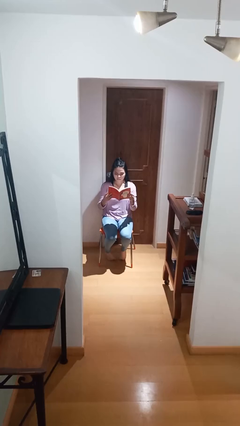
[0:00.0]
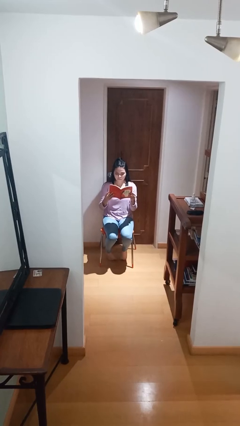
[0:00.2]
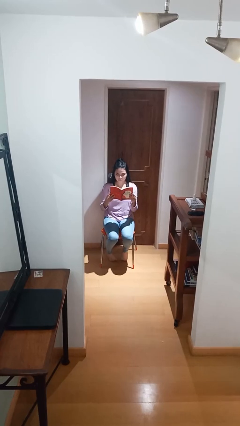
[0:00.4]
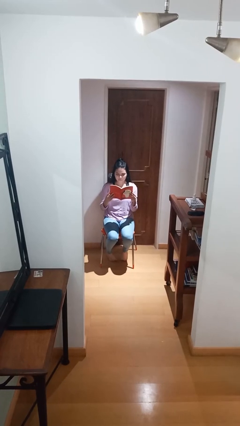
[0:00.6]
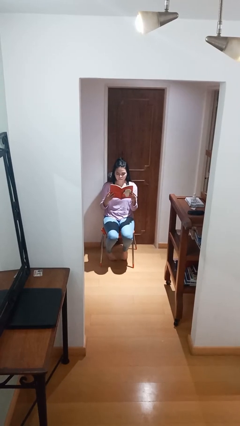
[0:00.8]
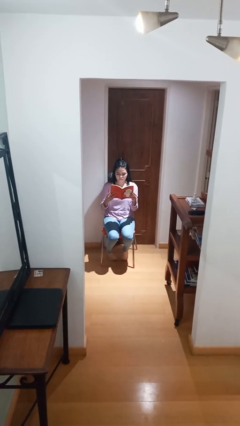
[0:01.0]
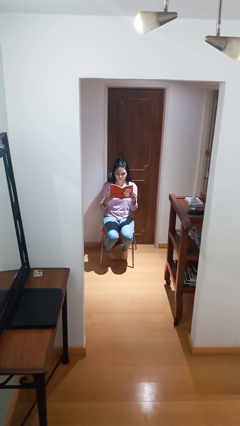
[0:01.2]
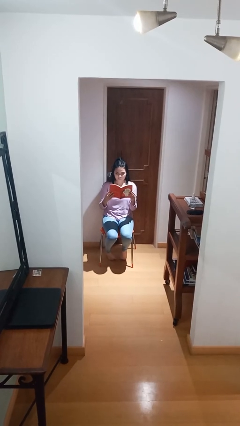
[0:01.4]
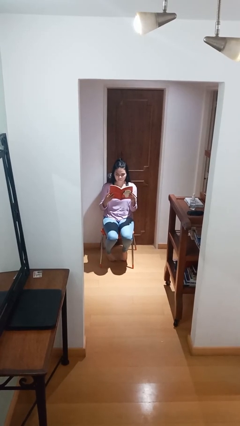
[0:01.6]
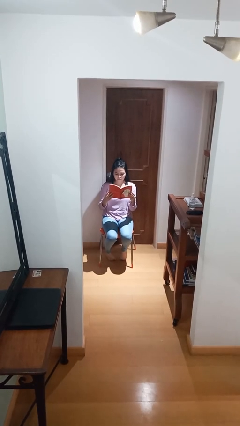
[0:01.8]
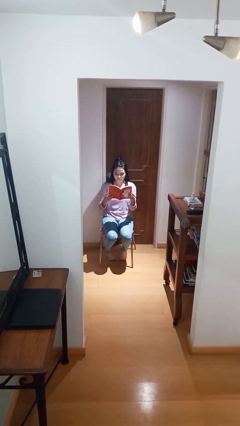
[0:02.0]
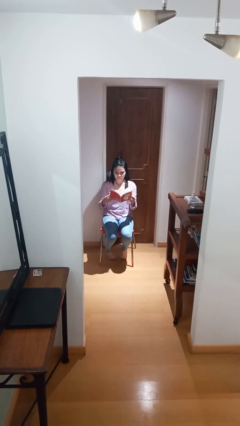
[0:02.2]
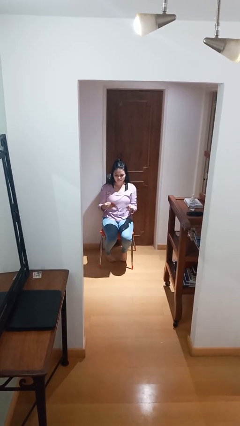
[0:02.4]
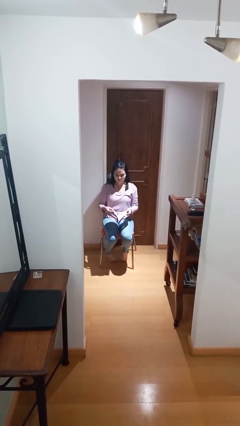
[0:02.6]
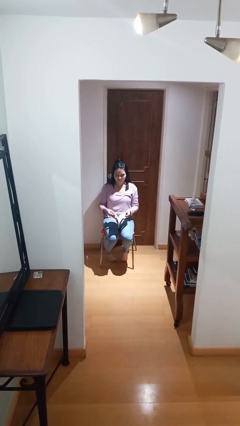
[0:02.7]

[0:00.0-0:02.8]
person reads document

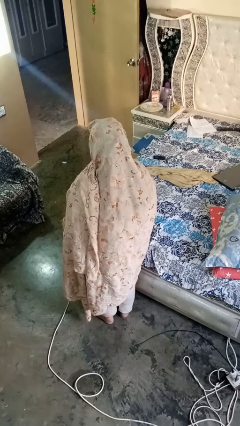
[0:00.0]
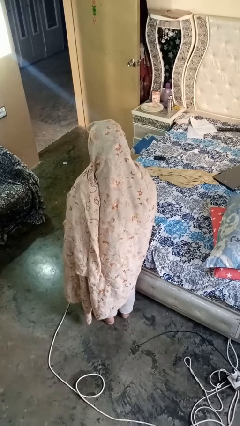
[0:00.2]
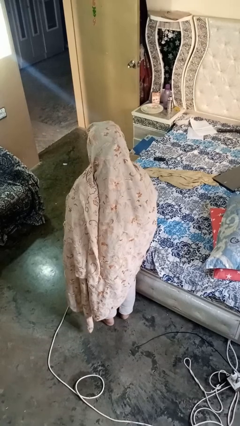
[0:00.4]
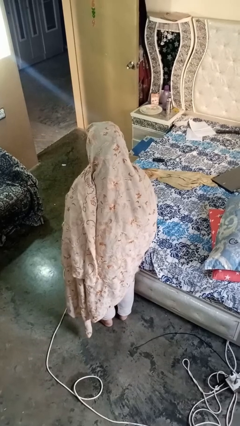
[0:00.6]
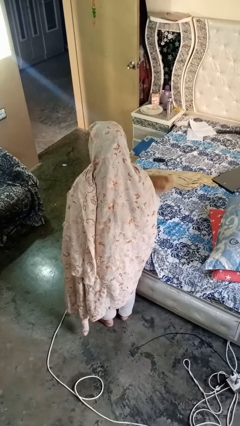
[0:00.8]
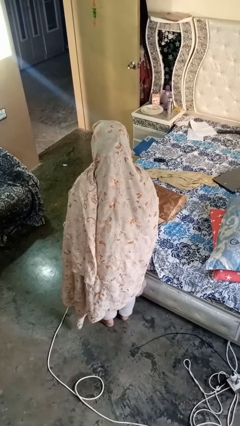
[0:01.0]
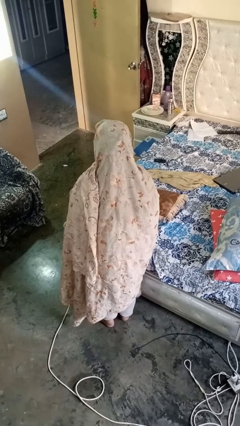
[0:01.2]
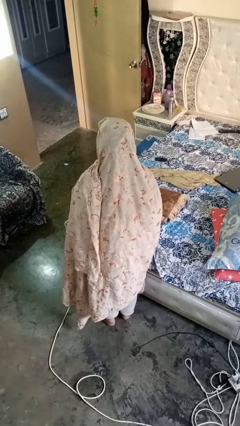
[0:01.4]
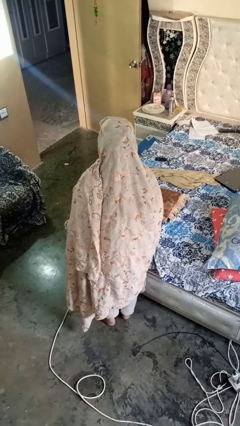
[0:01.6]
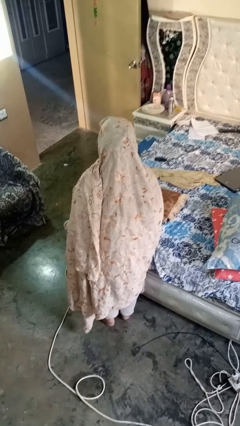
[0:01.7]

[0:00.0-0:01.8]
person puts down object on bed

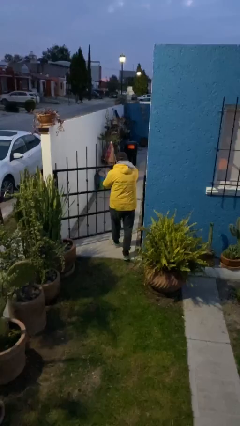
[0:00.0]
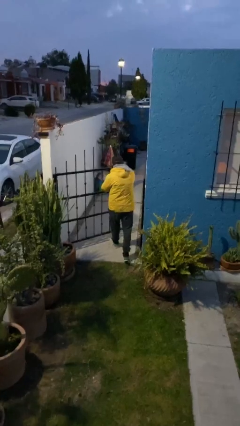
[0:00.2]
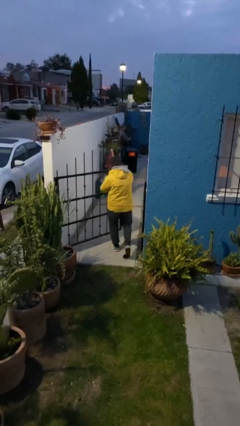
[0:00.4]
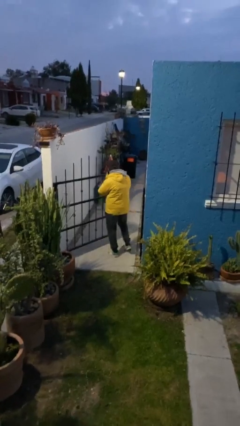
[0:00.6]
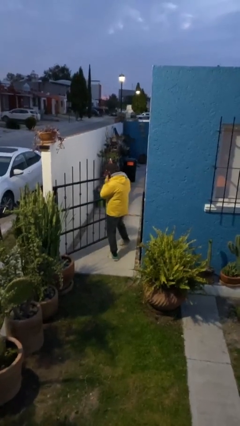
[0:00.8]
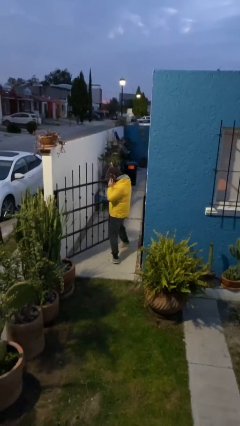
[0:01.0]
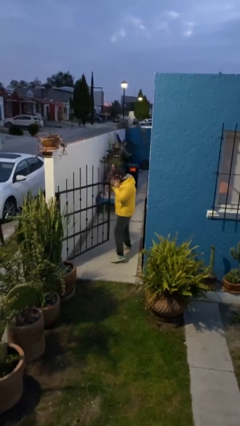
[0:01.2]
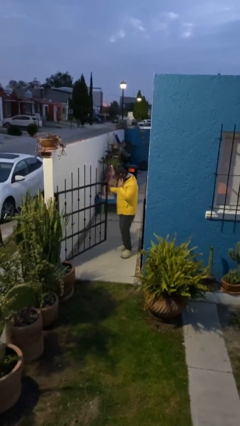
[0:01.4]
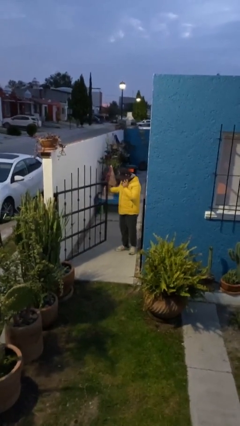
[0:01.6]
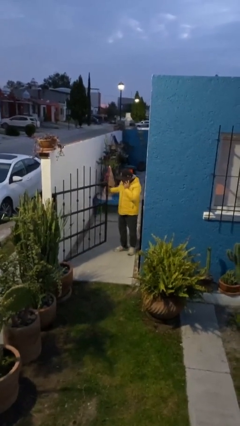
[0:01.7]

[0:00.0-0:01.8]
person exits scene through structure

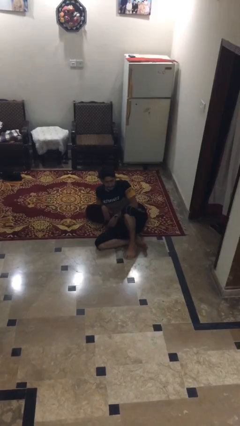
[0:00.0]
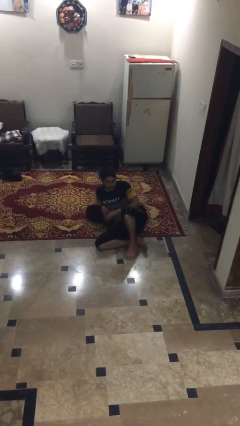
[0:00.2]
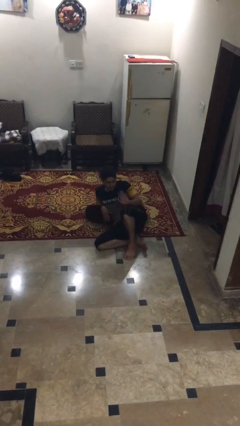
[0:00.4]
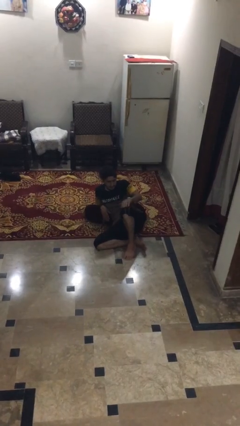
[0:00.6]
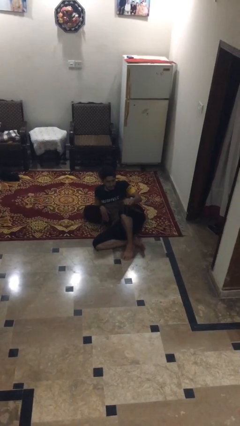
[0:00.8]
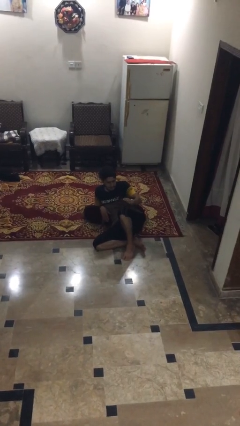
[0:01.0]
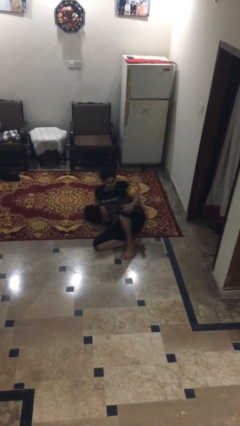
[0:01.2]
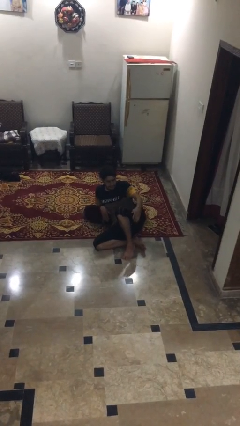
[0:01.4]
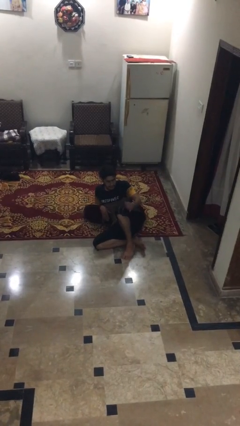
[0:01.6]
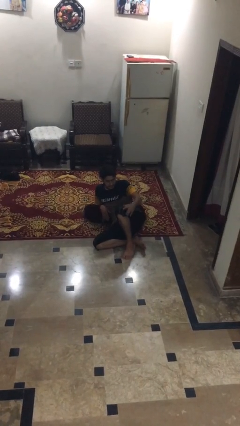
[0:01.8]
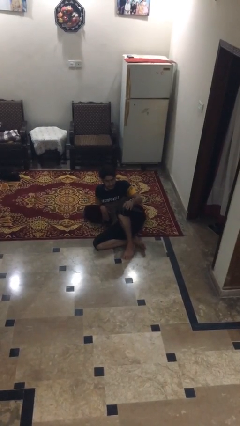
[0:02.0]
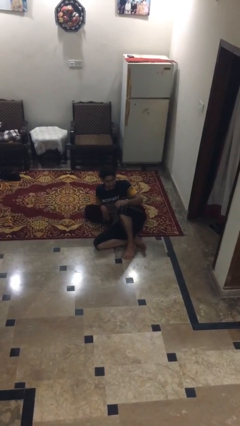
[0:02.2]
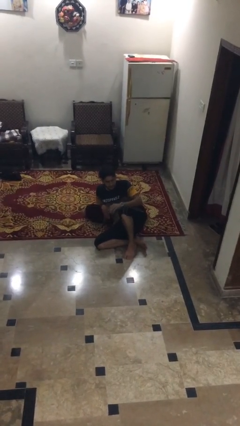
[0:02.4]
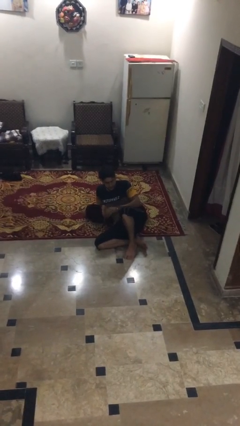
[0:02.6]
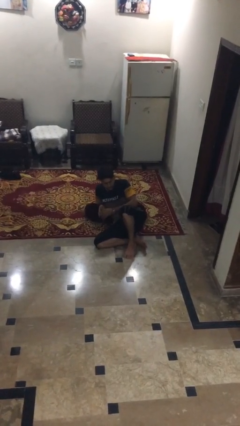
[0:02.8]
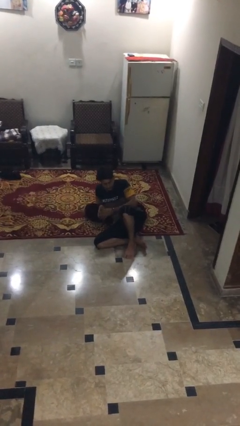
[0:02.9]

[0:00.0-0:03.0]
person swats bug

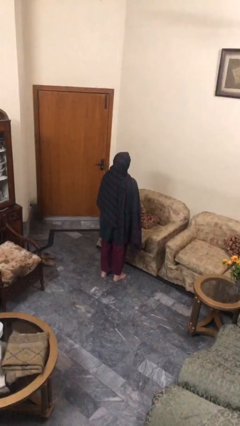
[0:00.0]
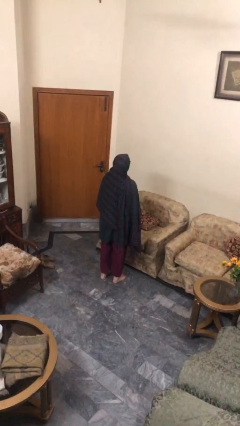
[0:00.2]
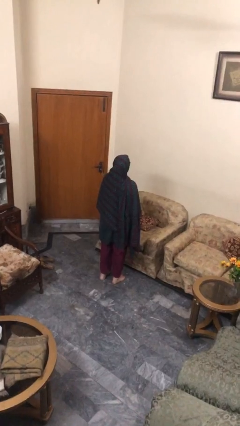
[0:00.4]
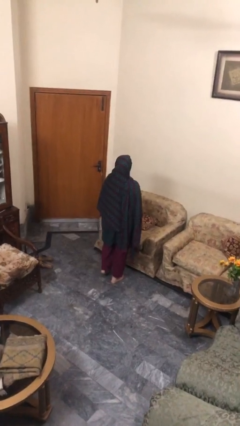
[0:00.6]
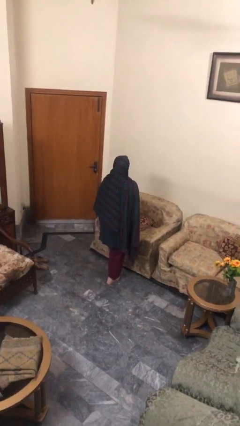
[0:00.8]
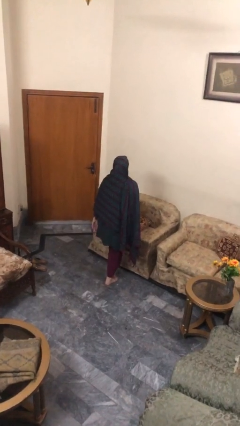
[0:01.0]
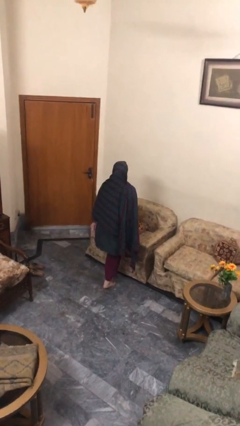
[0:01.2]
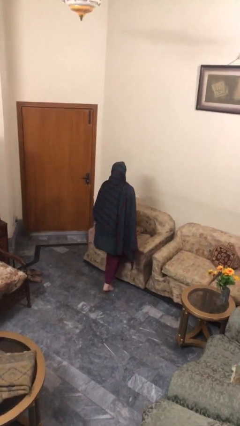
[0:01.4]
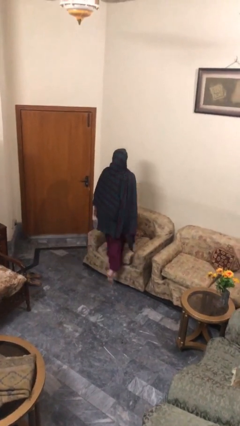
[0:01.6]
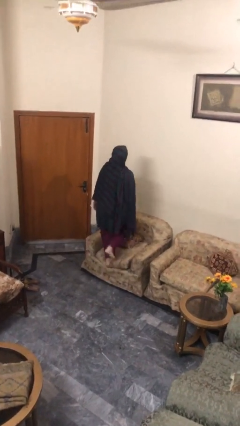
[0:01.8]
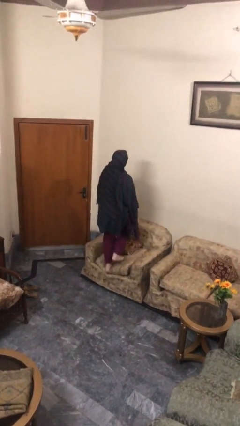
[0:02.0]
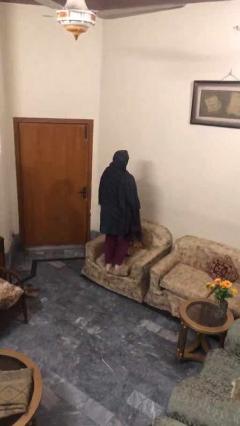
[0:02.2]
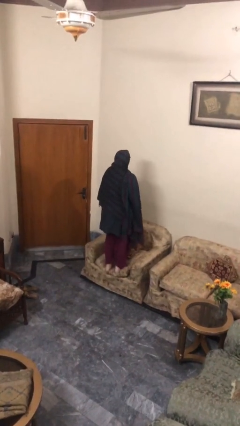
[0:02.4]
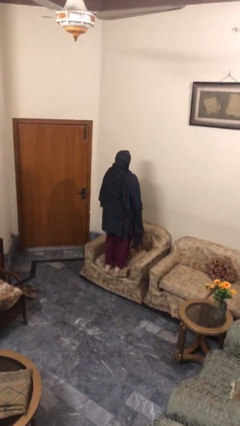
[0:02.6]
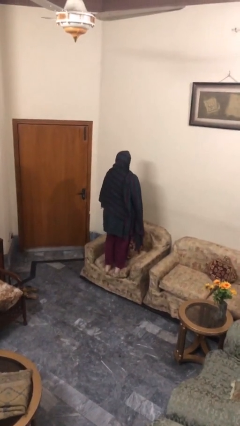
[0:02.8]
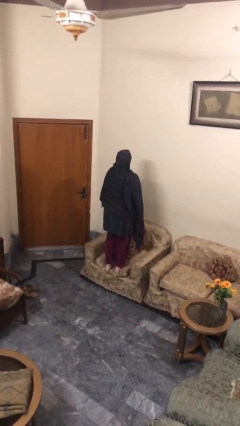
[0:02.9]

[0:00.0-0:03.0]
person climbs on couch

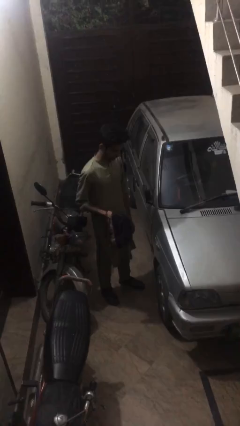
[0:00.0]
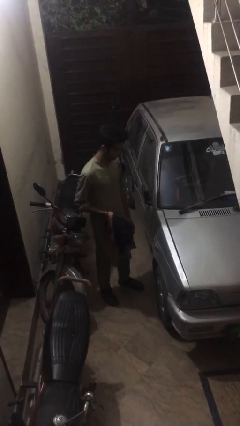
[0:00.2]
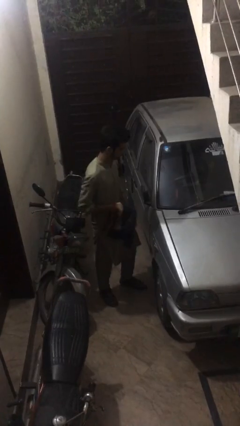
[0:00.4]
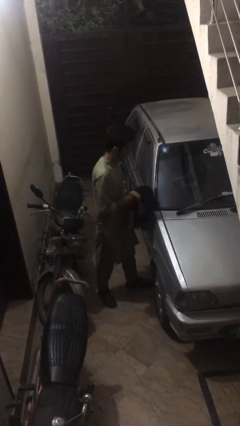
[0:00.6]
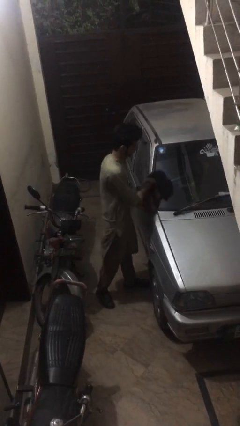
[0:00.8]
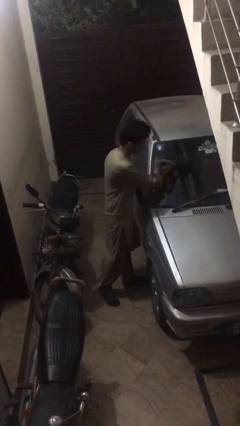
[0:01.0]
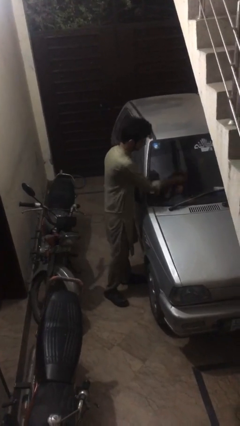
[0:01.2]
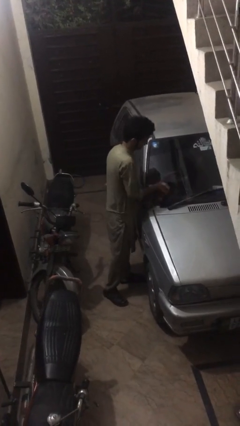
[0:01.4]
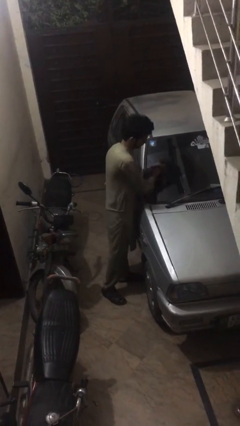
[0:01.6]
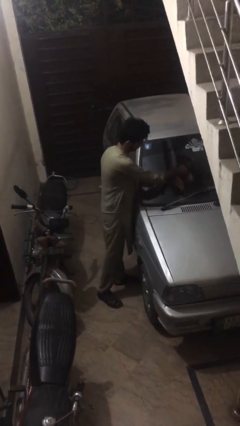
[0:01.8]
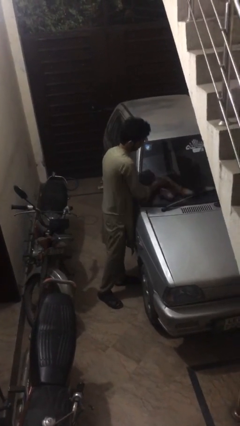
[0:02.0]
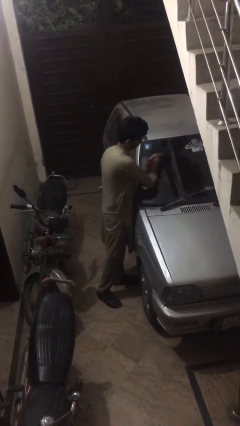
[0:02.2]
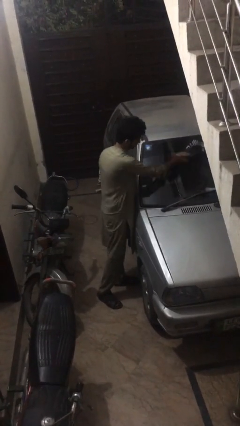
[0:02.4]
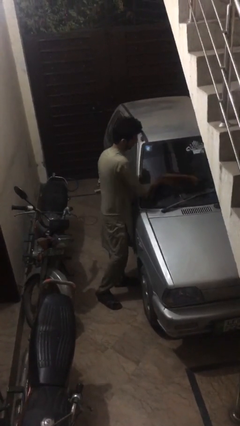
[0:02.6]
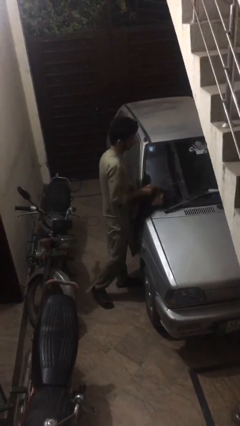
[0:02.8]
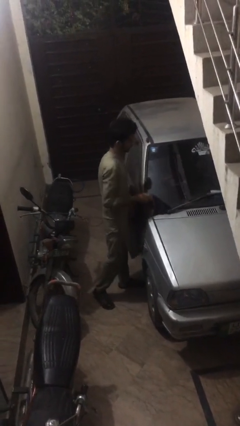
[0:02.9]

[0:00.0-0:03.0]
person polishes car with rag

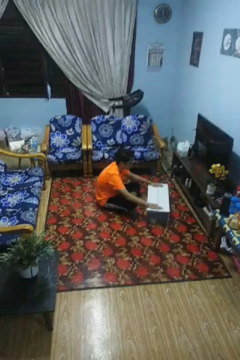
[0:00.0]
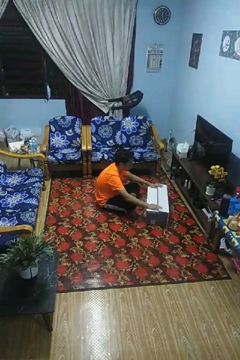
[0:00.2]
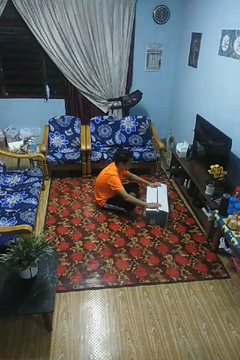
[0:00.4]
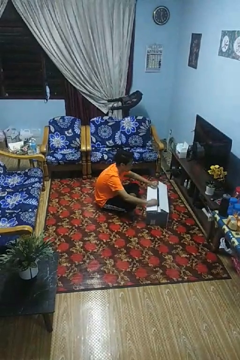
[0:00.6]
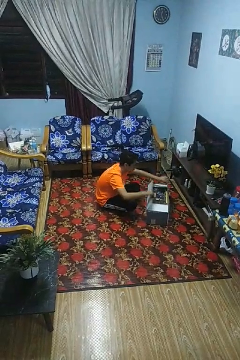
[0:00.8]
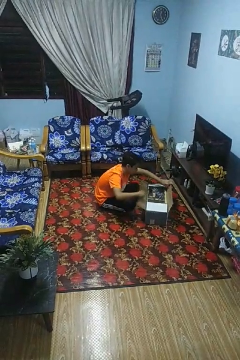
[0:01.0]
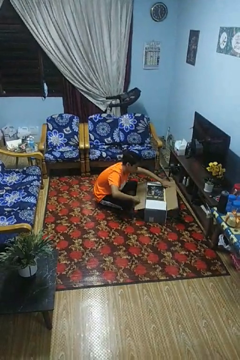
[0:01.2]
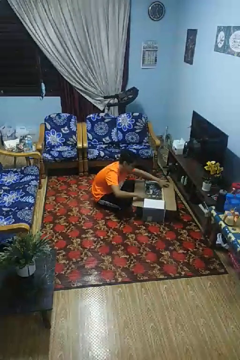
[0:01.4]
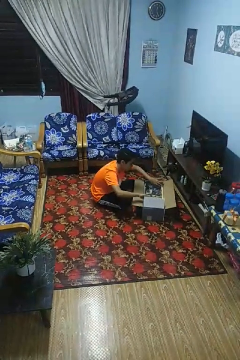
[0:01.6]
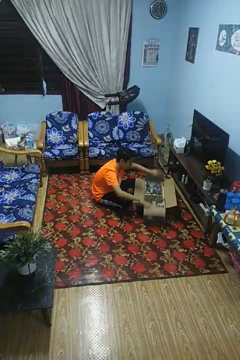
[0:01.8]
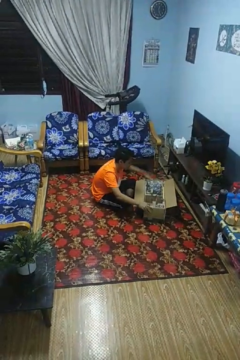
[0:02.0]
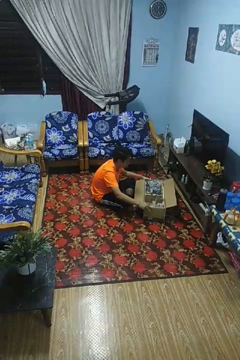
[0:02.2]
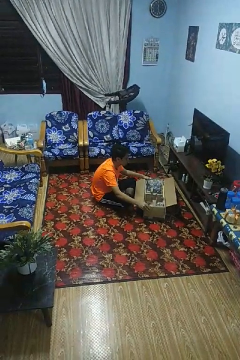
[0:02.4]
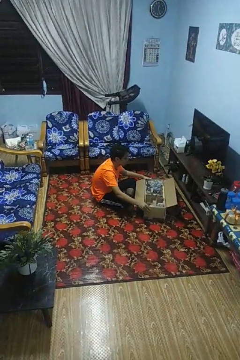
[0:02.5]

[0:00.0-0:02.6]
person opens box
